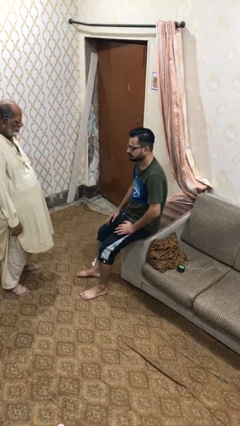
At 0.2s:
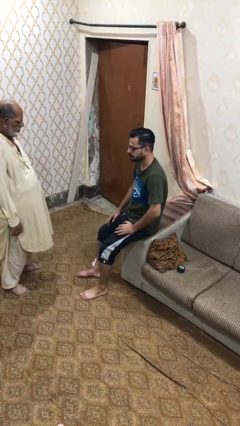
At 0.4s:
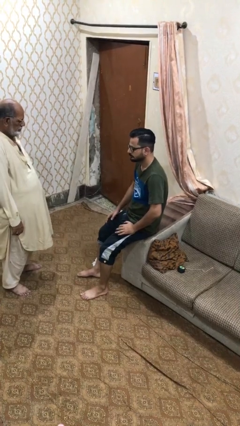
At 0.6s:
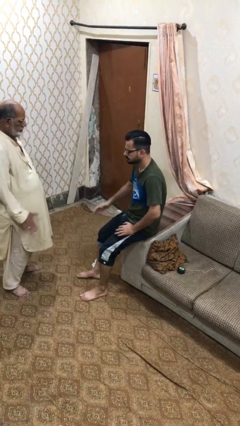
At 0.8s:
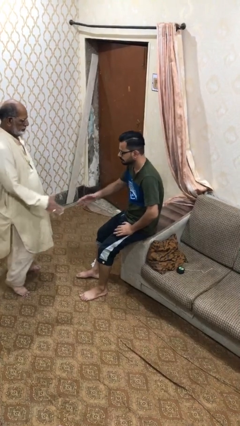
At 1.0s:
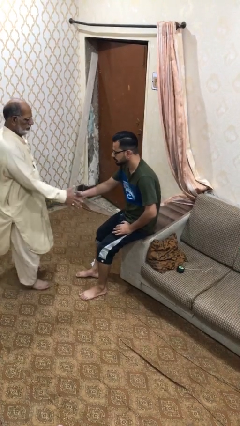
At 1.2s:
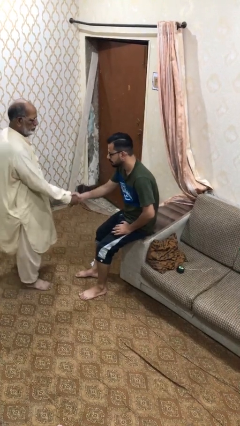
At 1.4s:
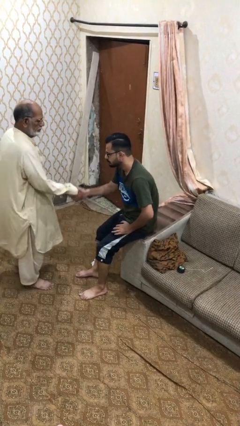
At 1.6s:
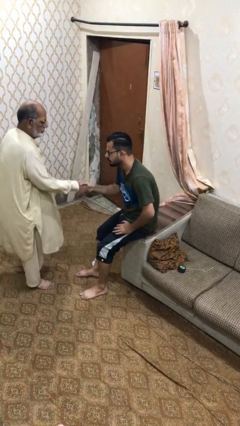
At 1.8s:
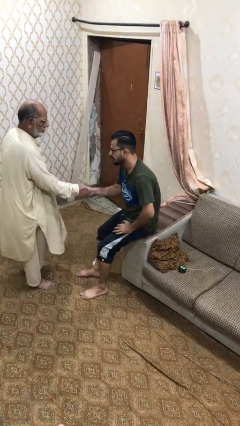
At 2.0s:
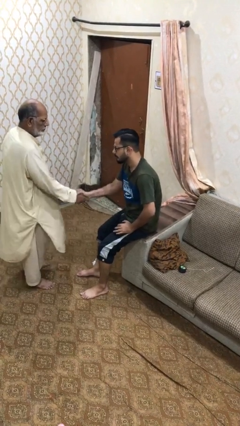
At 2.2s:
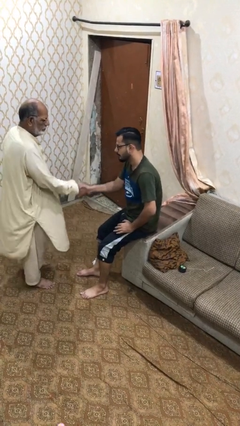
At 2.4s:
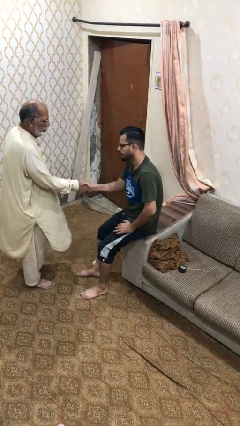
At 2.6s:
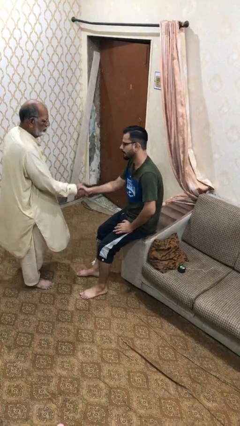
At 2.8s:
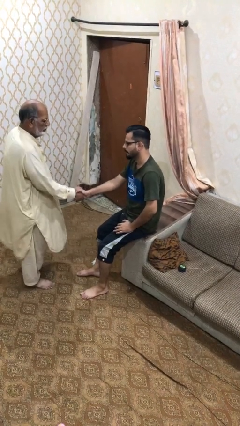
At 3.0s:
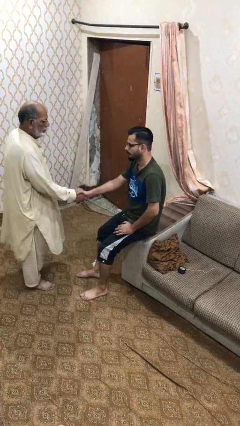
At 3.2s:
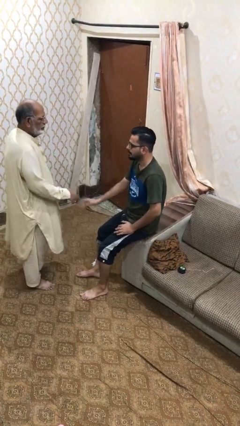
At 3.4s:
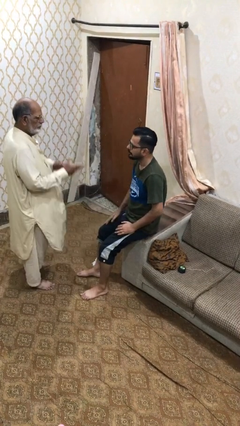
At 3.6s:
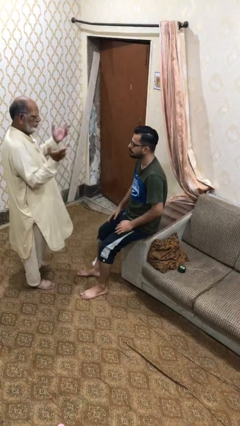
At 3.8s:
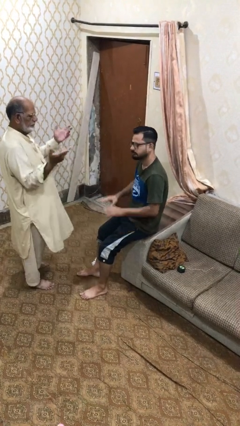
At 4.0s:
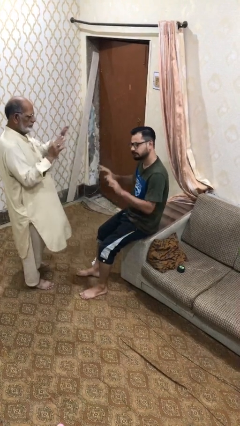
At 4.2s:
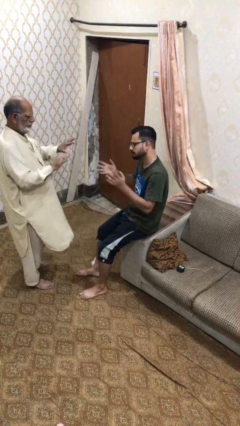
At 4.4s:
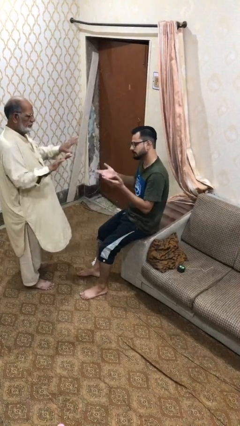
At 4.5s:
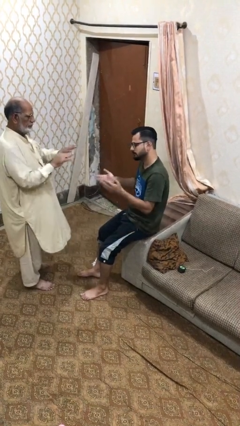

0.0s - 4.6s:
person shakes hand

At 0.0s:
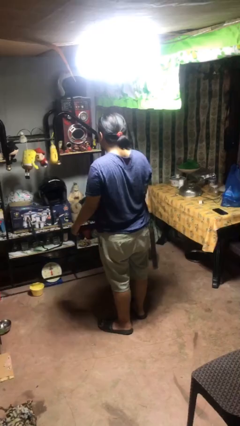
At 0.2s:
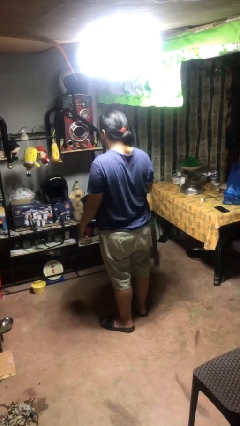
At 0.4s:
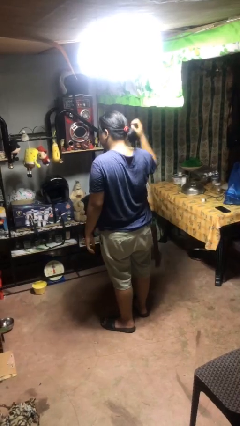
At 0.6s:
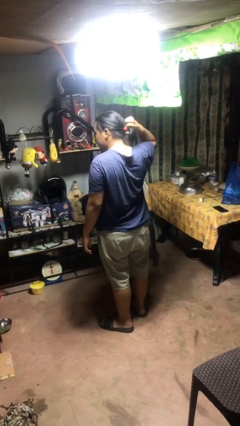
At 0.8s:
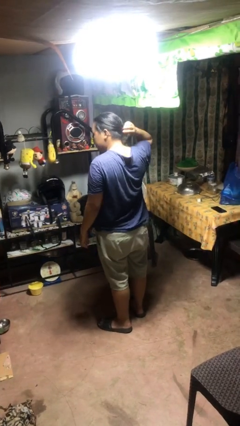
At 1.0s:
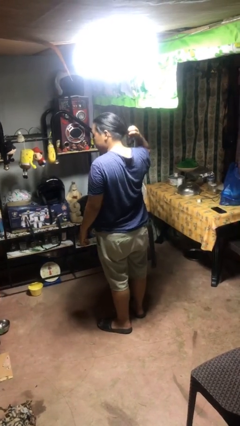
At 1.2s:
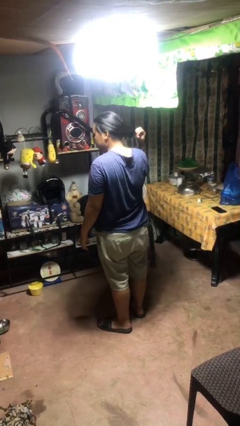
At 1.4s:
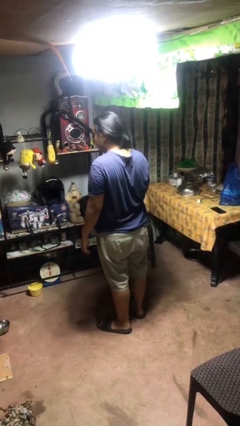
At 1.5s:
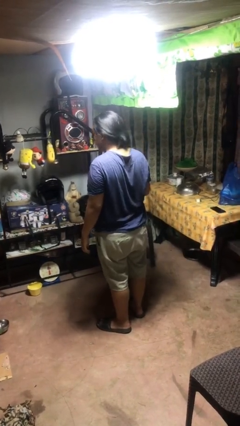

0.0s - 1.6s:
person takes off hairtie

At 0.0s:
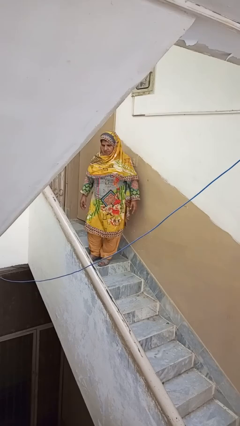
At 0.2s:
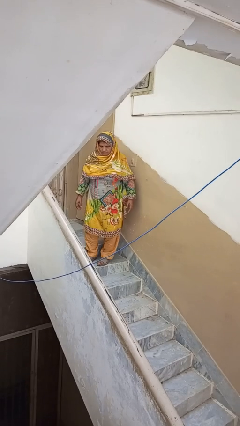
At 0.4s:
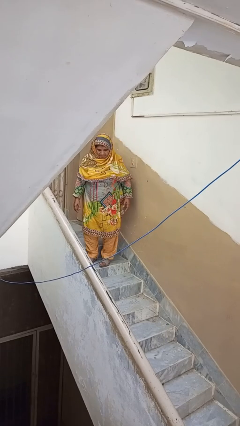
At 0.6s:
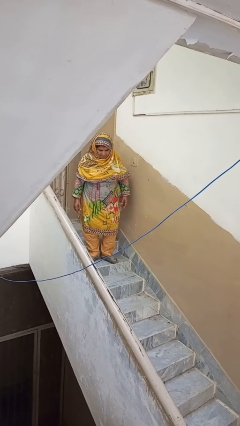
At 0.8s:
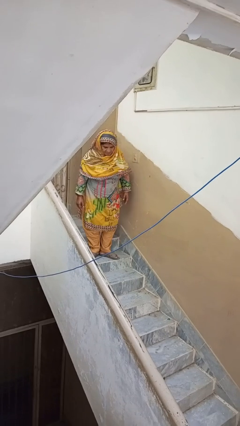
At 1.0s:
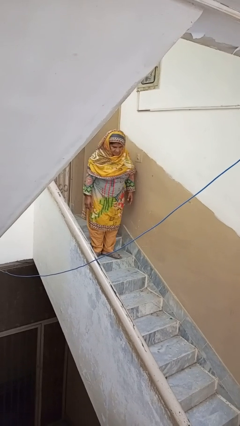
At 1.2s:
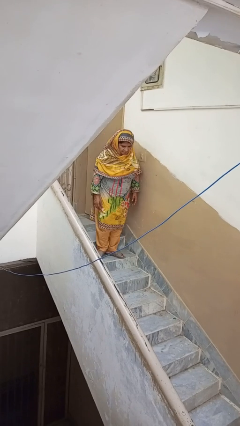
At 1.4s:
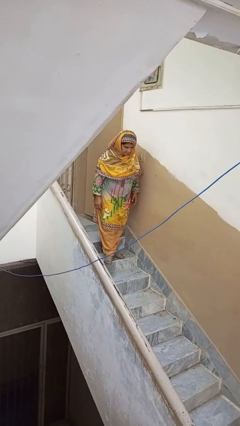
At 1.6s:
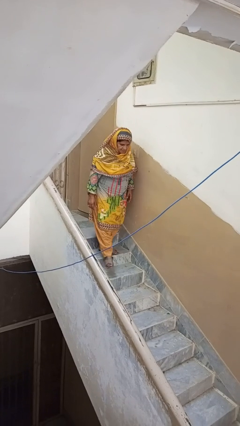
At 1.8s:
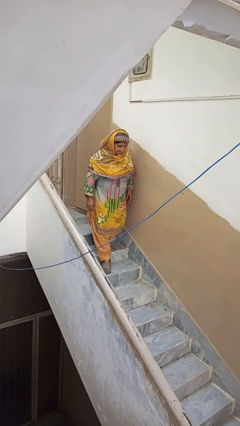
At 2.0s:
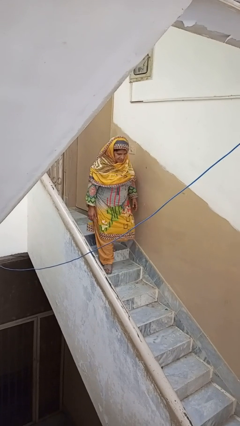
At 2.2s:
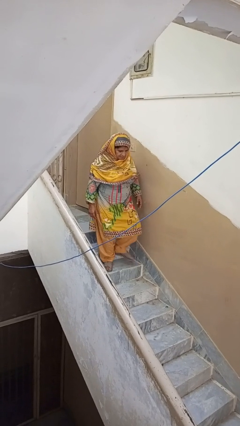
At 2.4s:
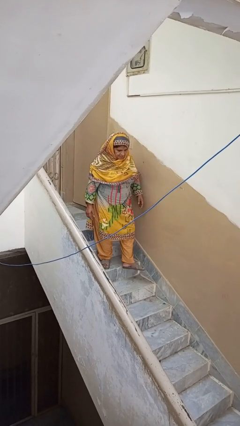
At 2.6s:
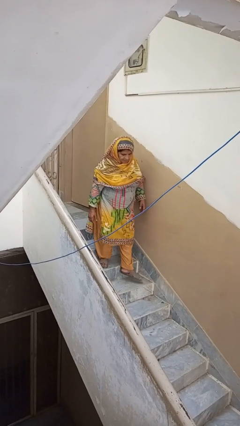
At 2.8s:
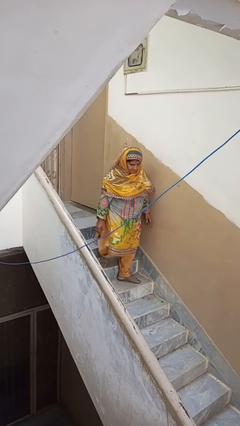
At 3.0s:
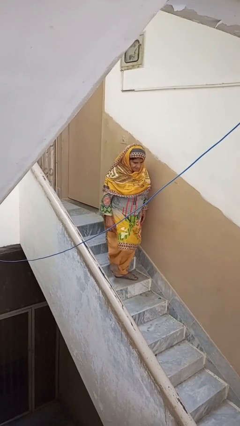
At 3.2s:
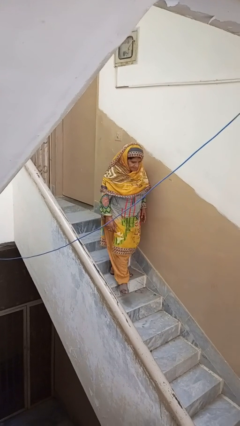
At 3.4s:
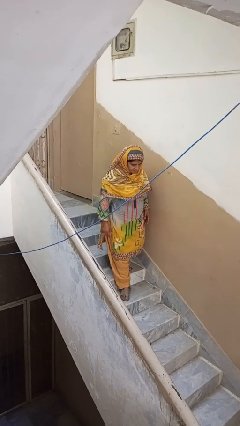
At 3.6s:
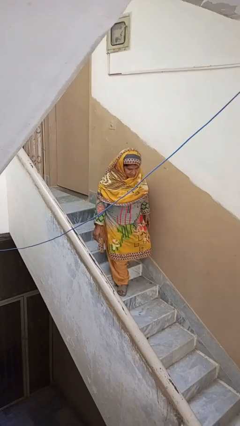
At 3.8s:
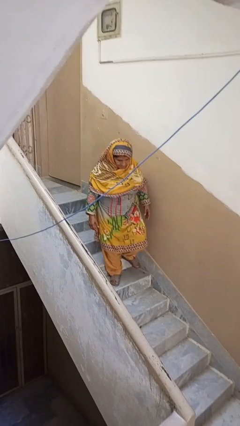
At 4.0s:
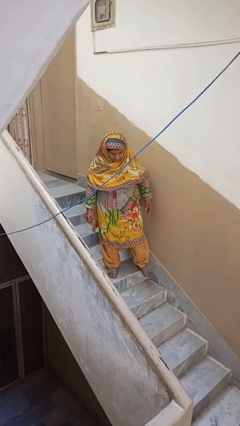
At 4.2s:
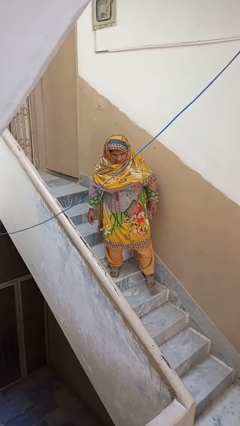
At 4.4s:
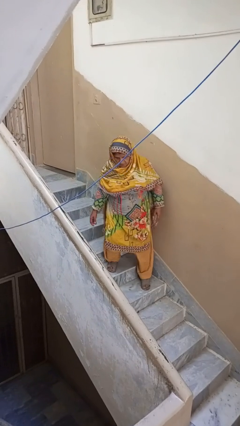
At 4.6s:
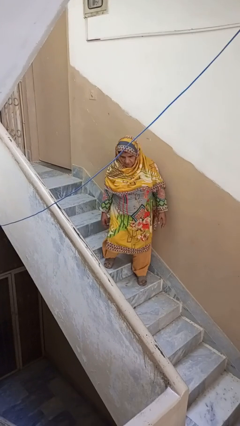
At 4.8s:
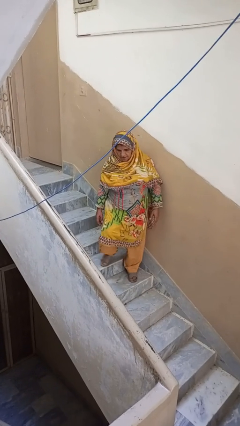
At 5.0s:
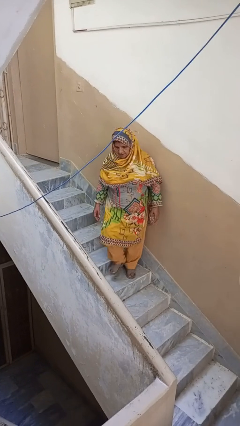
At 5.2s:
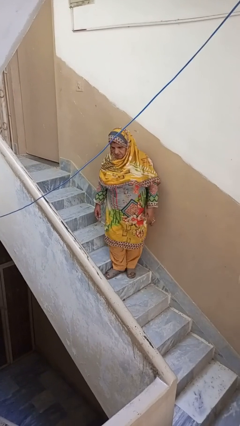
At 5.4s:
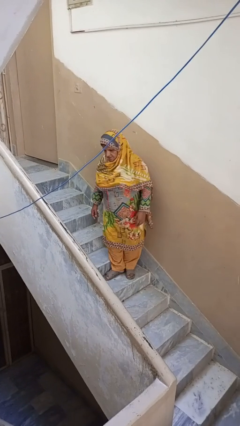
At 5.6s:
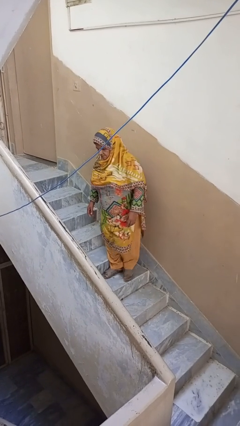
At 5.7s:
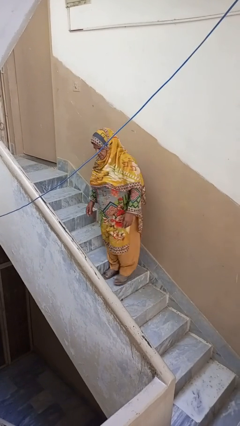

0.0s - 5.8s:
person climbs down stairs

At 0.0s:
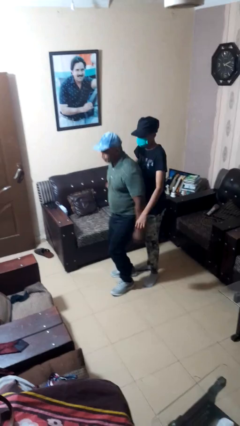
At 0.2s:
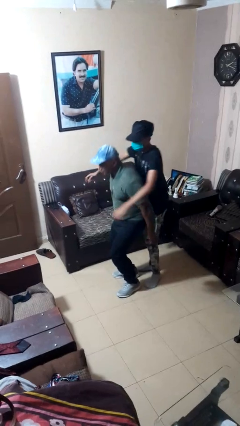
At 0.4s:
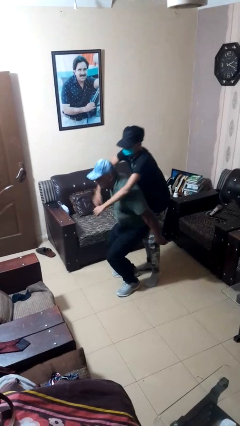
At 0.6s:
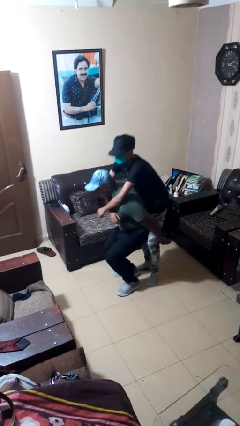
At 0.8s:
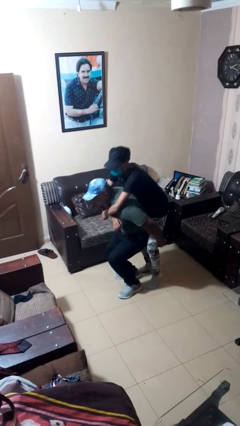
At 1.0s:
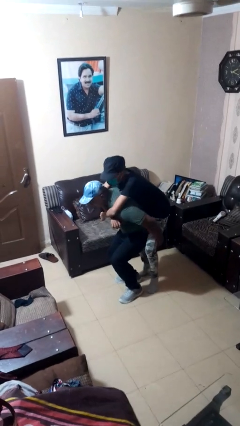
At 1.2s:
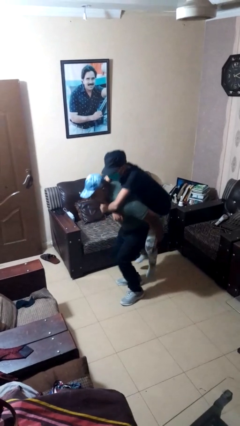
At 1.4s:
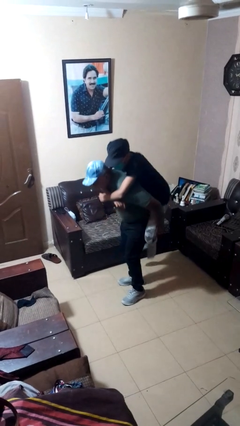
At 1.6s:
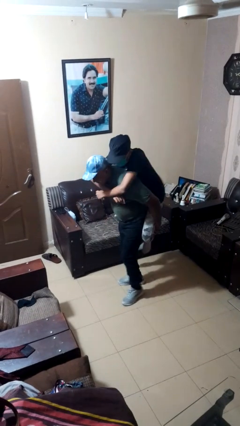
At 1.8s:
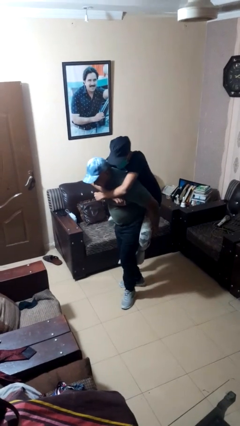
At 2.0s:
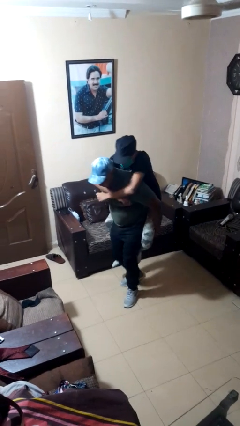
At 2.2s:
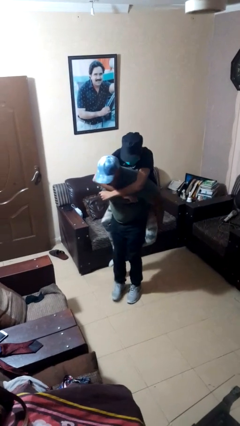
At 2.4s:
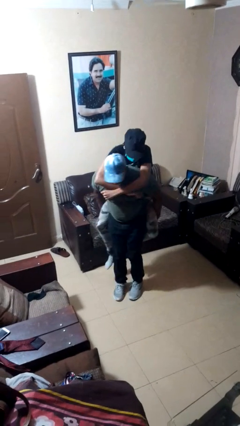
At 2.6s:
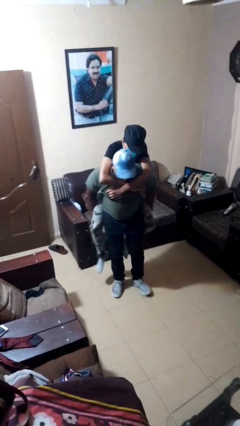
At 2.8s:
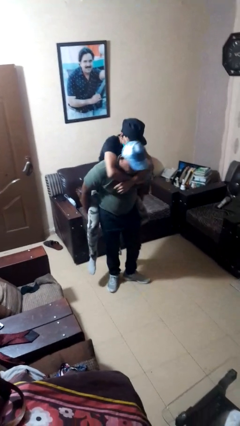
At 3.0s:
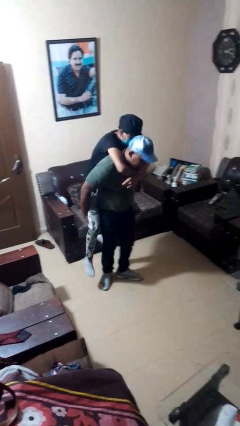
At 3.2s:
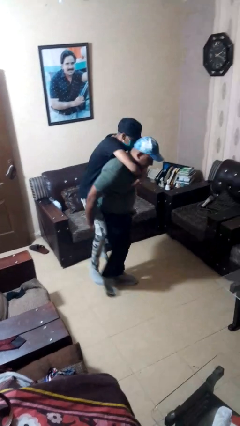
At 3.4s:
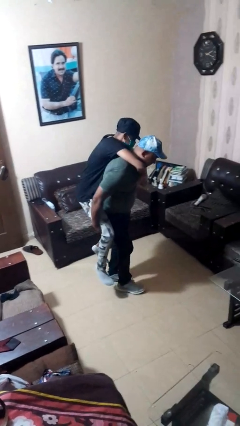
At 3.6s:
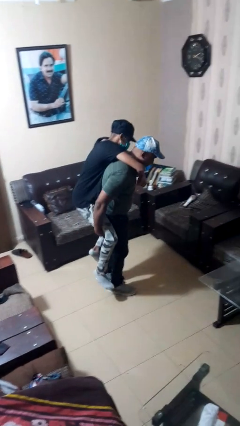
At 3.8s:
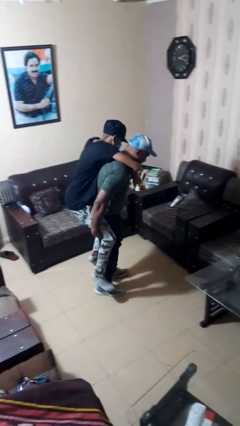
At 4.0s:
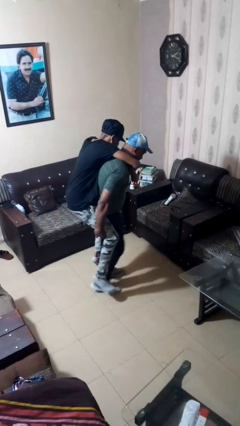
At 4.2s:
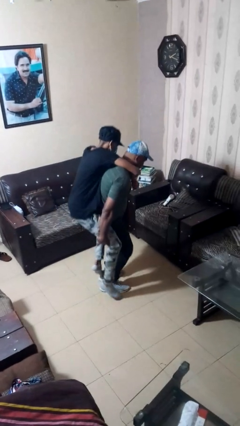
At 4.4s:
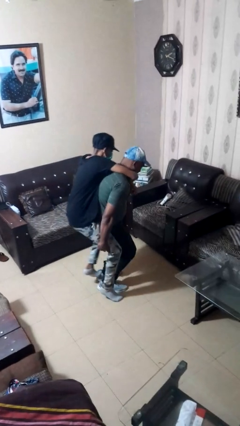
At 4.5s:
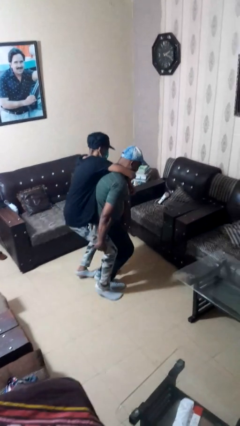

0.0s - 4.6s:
person carries person on back

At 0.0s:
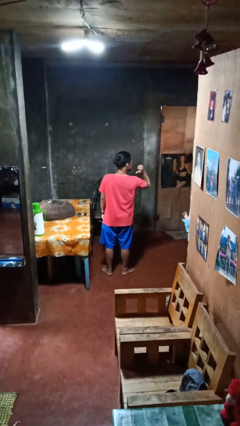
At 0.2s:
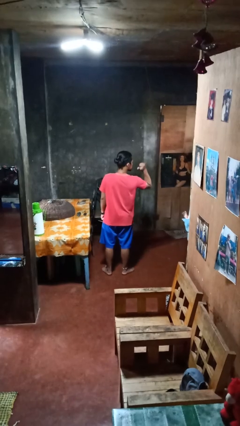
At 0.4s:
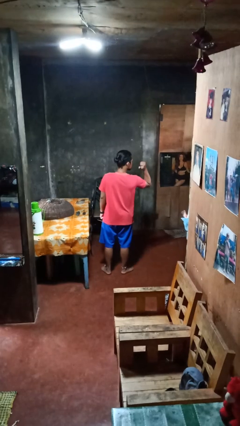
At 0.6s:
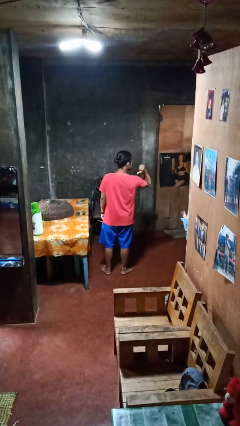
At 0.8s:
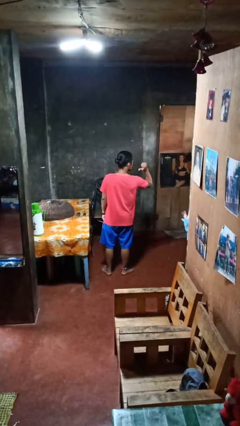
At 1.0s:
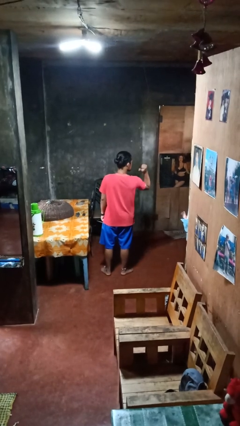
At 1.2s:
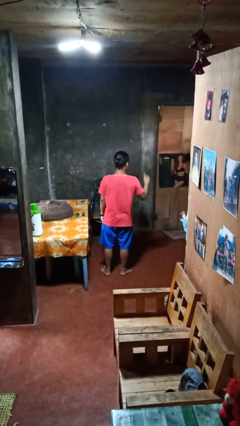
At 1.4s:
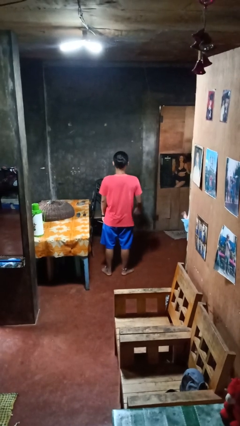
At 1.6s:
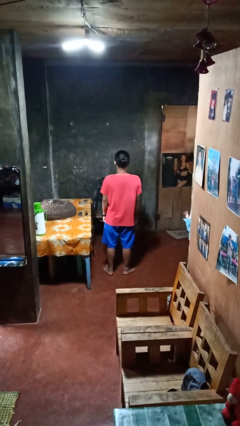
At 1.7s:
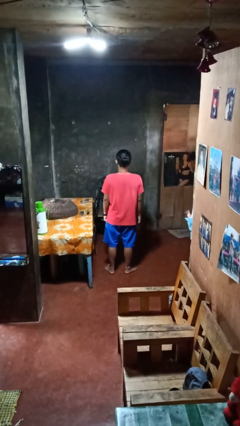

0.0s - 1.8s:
person gestures behind me
